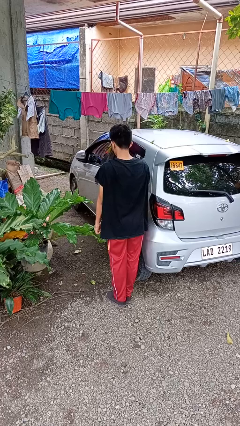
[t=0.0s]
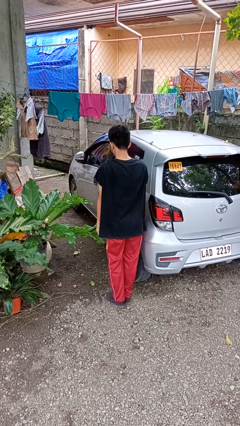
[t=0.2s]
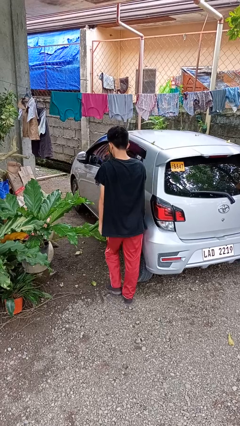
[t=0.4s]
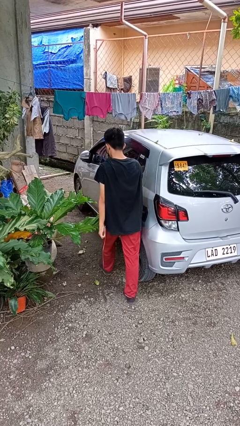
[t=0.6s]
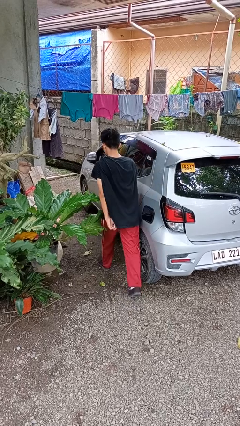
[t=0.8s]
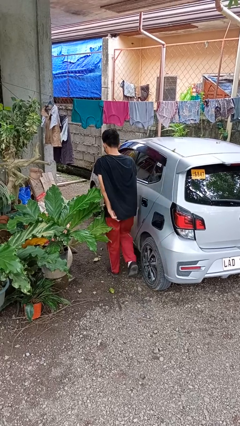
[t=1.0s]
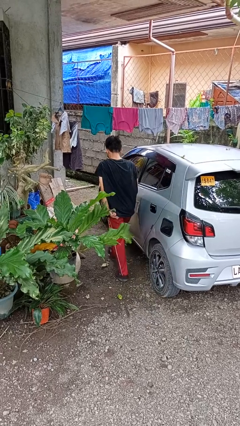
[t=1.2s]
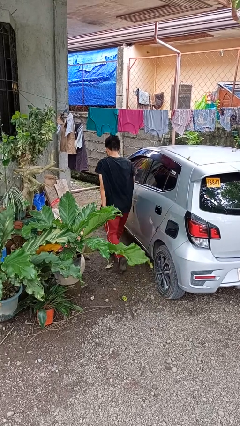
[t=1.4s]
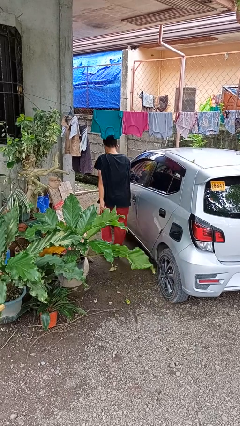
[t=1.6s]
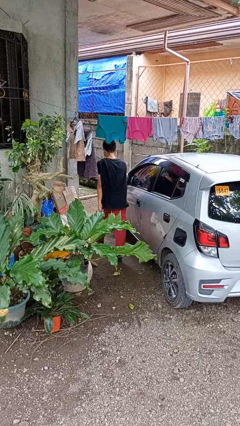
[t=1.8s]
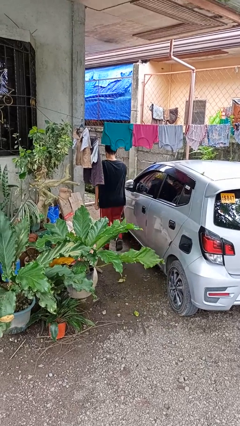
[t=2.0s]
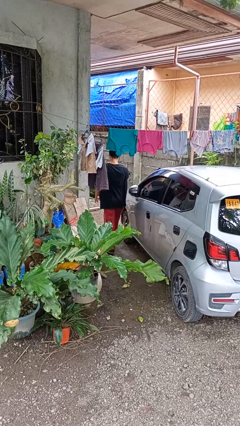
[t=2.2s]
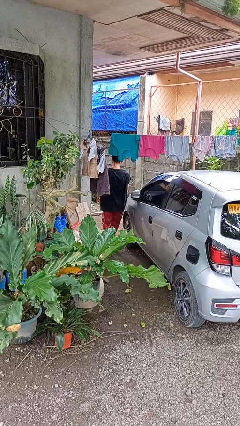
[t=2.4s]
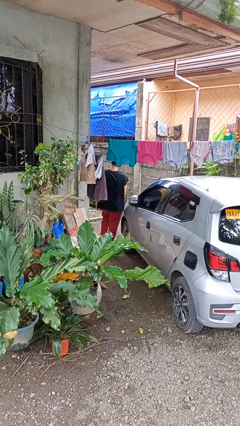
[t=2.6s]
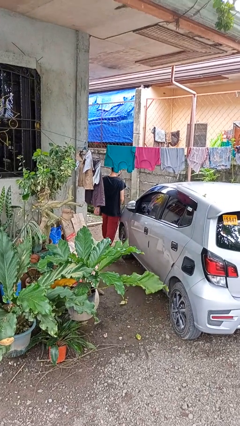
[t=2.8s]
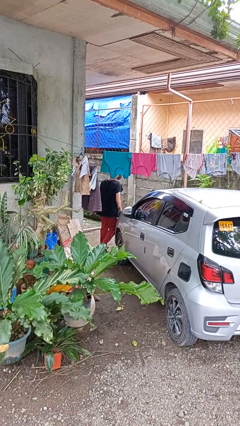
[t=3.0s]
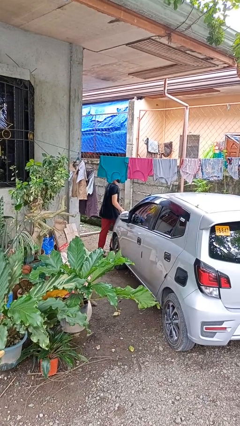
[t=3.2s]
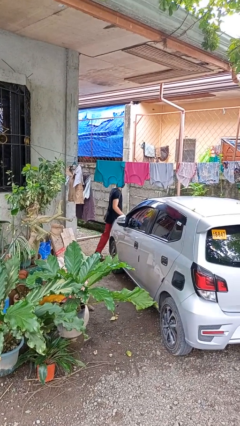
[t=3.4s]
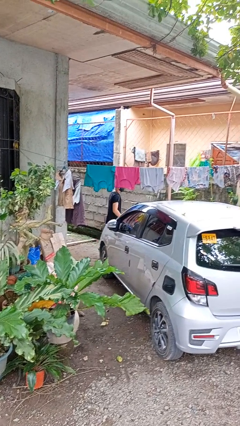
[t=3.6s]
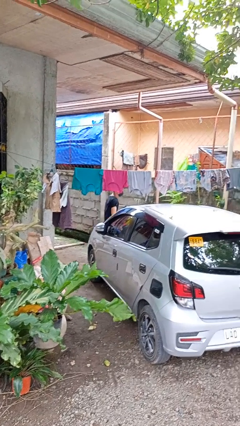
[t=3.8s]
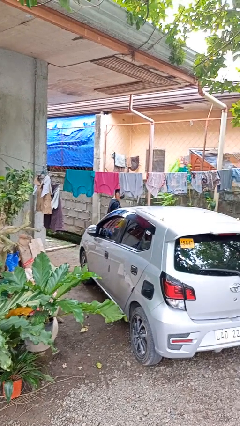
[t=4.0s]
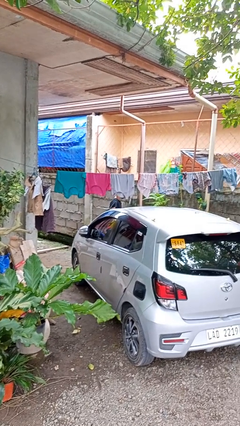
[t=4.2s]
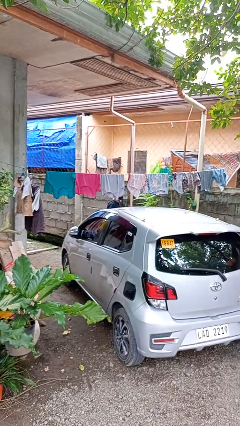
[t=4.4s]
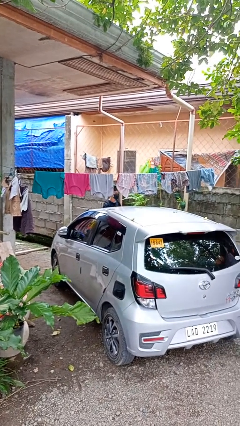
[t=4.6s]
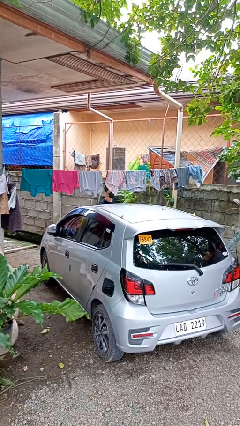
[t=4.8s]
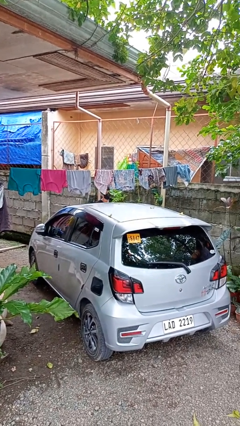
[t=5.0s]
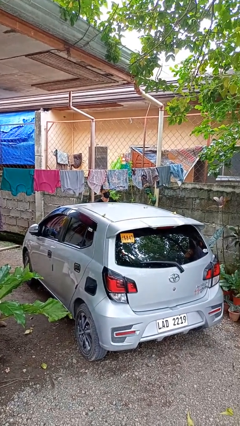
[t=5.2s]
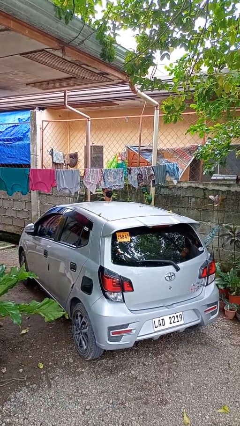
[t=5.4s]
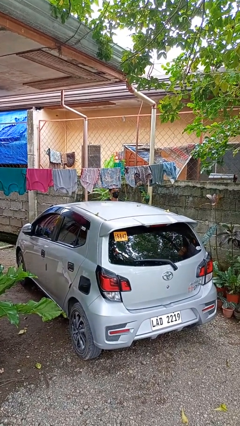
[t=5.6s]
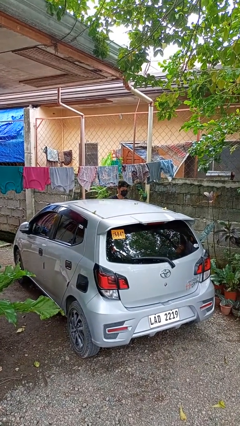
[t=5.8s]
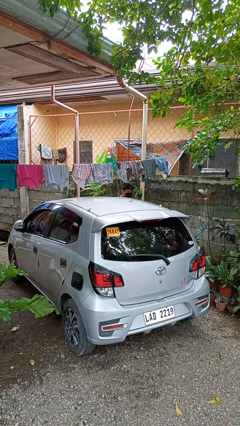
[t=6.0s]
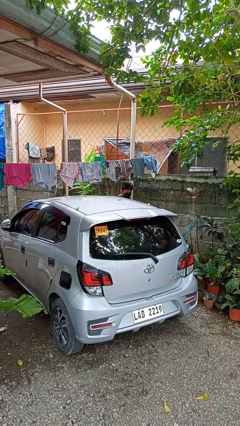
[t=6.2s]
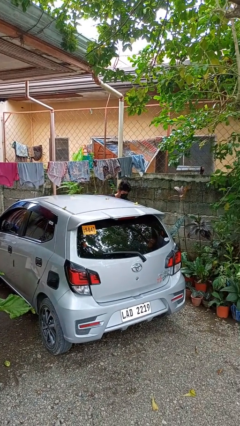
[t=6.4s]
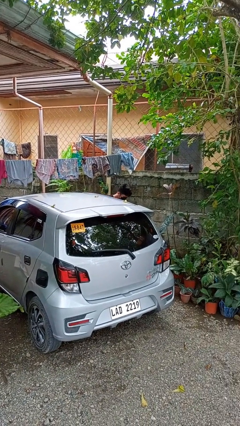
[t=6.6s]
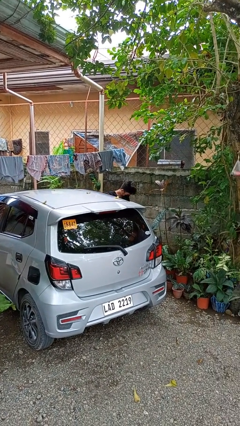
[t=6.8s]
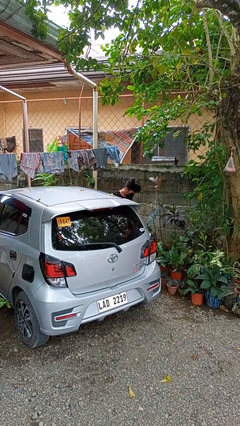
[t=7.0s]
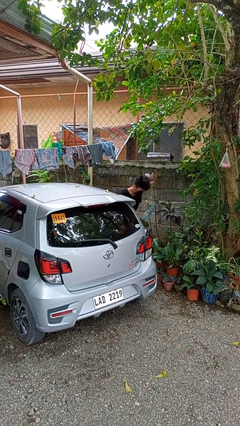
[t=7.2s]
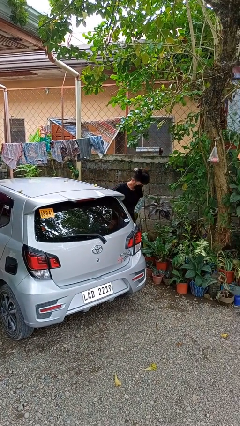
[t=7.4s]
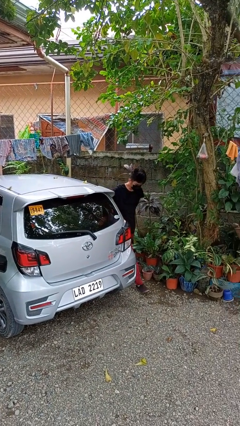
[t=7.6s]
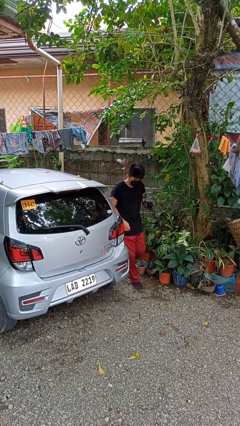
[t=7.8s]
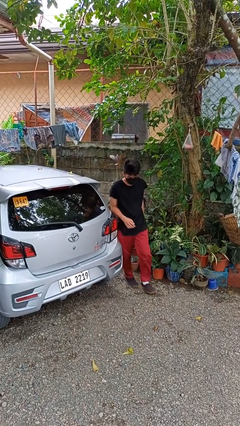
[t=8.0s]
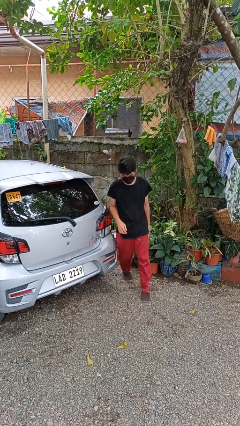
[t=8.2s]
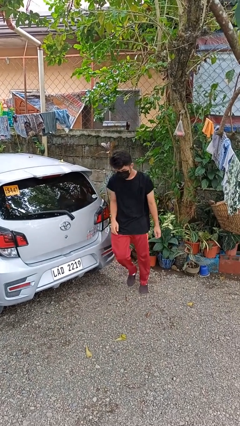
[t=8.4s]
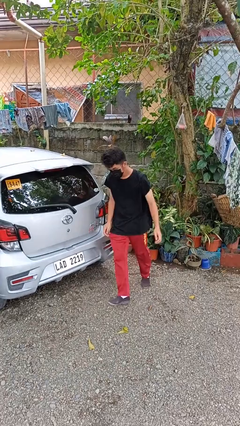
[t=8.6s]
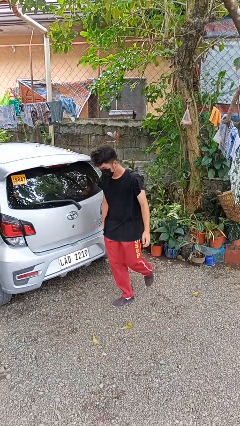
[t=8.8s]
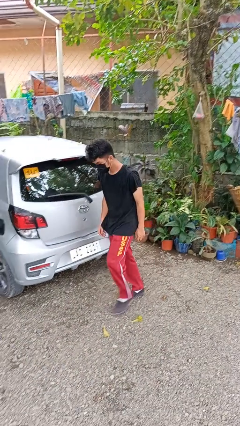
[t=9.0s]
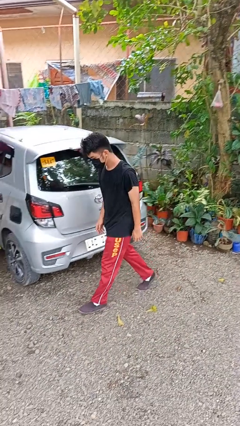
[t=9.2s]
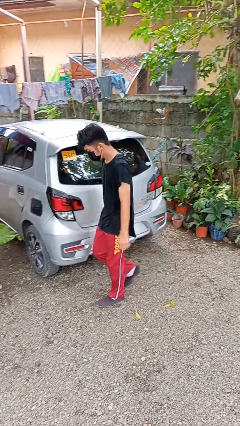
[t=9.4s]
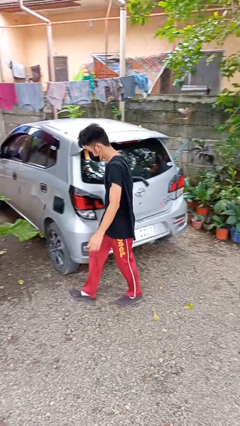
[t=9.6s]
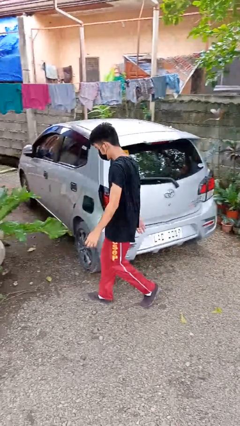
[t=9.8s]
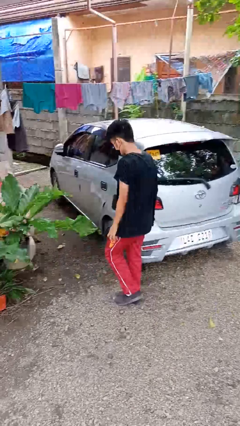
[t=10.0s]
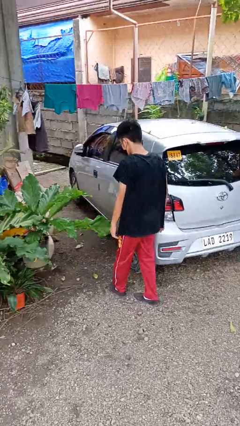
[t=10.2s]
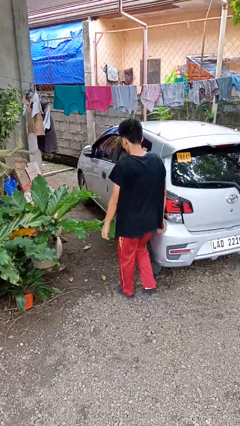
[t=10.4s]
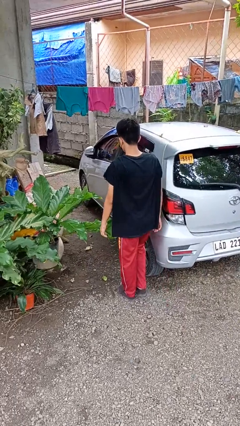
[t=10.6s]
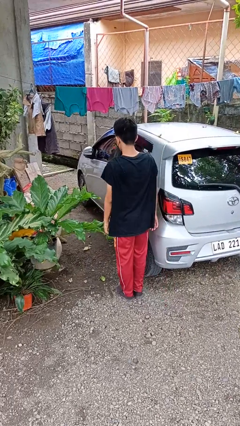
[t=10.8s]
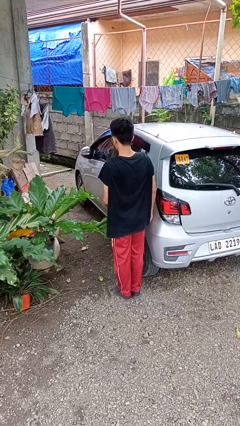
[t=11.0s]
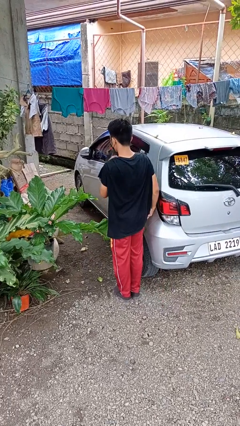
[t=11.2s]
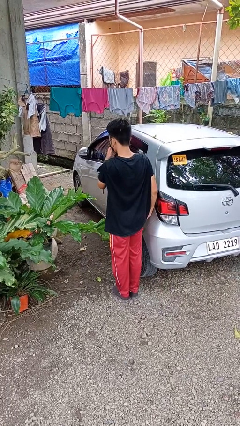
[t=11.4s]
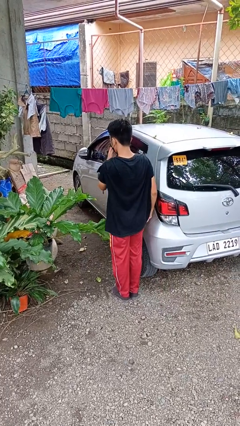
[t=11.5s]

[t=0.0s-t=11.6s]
person walks around car

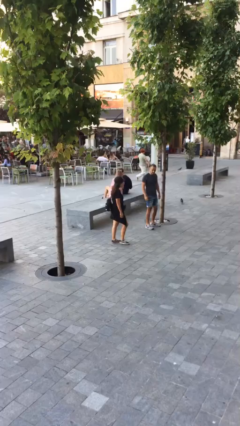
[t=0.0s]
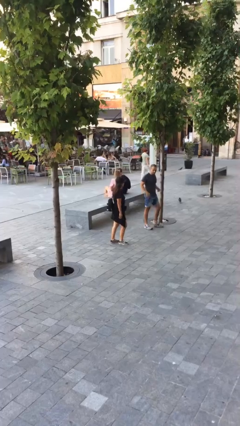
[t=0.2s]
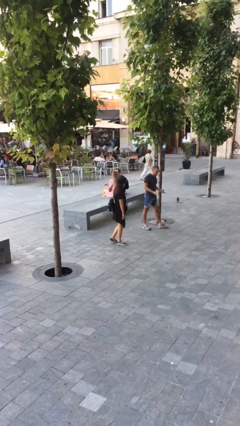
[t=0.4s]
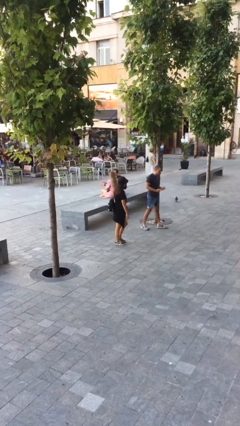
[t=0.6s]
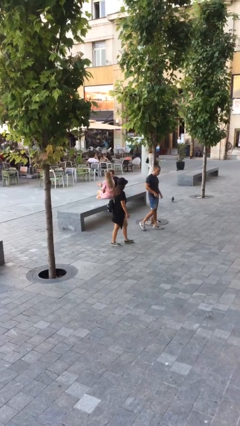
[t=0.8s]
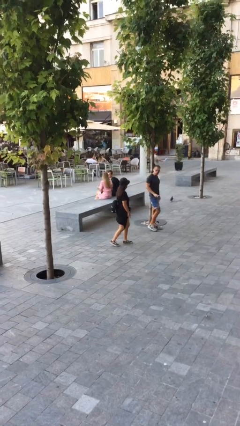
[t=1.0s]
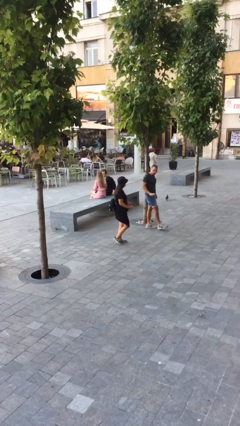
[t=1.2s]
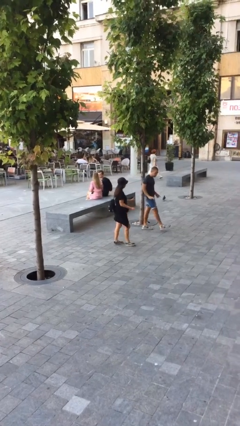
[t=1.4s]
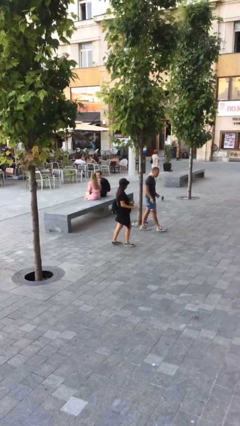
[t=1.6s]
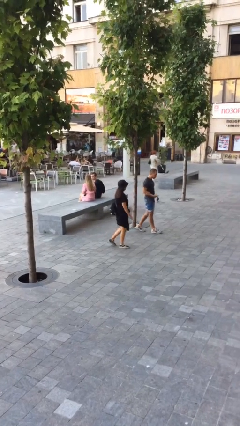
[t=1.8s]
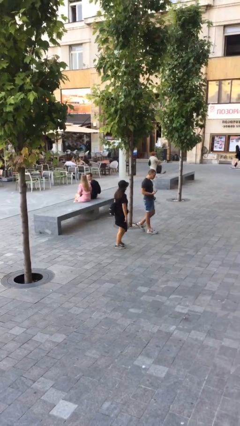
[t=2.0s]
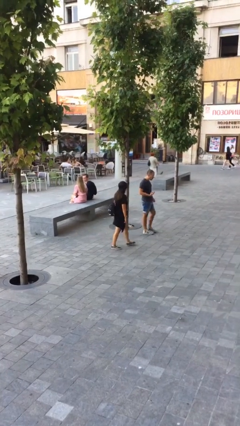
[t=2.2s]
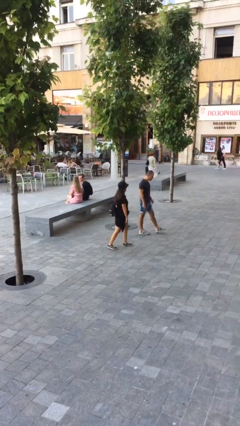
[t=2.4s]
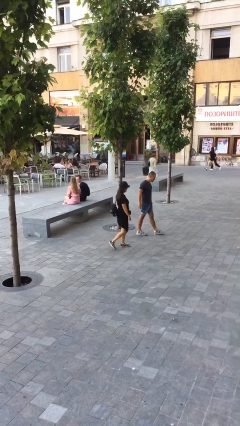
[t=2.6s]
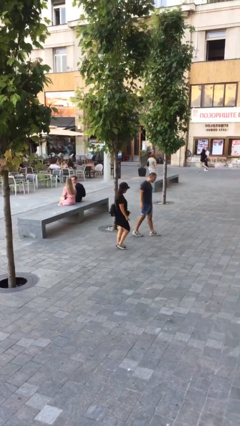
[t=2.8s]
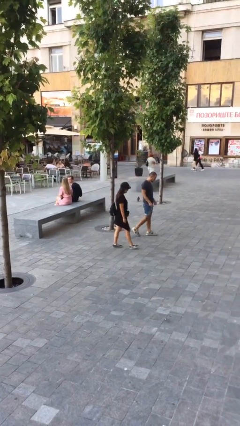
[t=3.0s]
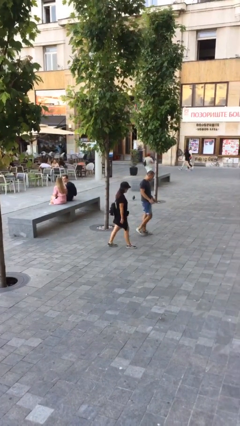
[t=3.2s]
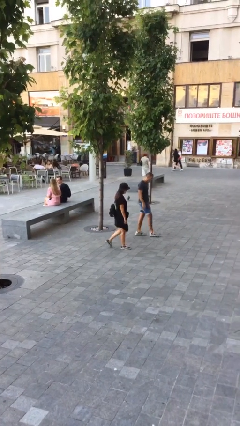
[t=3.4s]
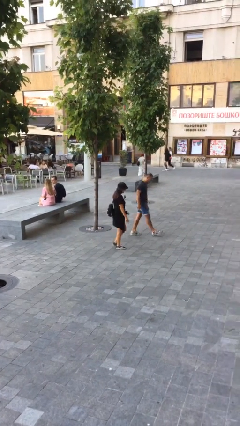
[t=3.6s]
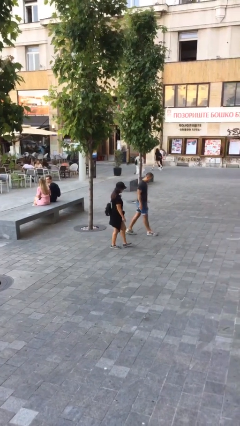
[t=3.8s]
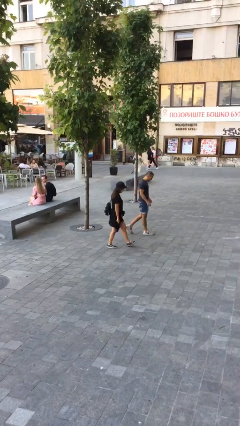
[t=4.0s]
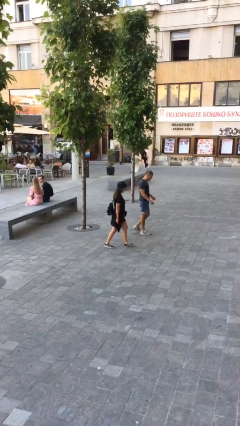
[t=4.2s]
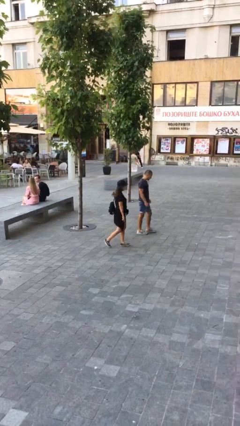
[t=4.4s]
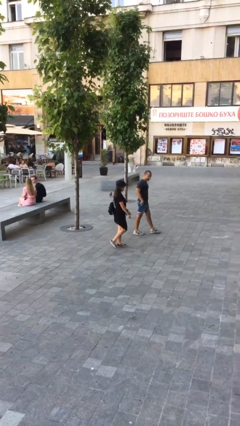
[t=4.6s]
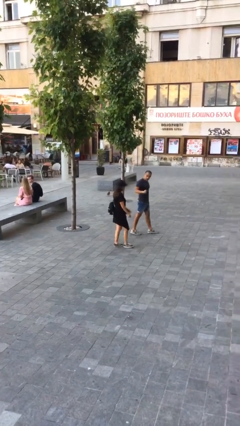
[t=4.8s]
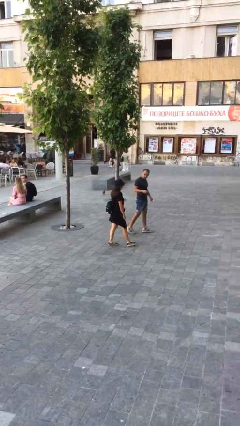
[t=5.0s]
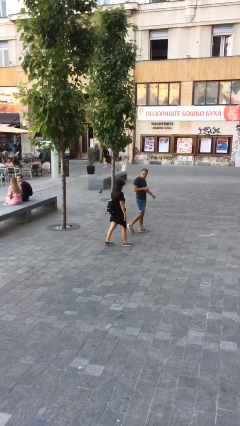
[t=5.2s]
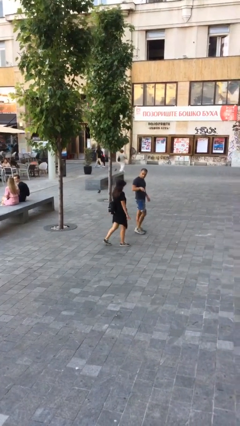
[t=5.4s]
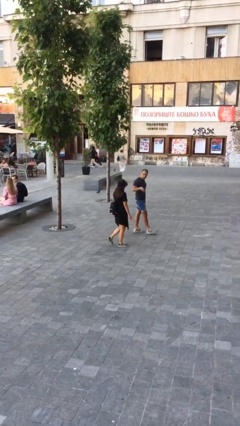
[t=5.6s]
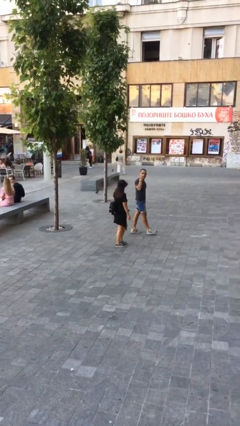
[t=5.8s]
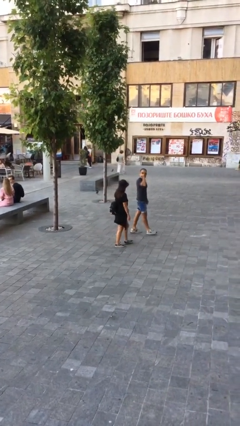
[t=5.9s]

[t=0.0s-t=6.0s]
person talks to person

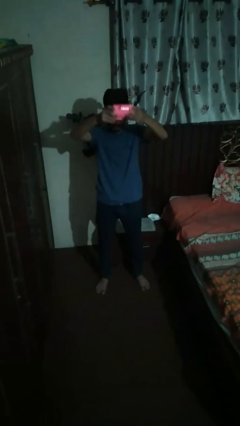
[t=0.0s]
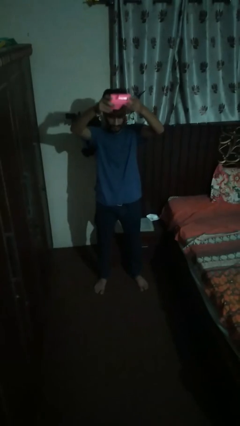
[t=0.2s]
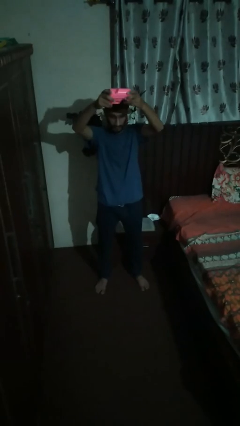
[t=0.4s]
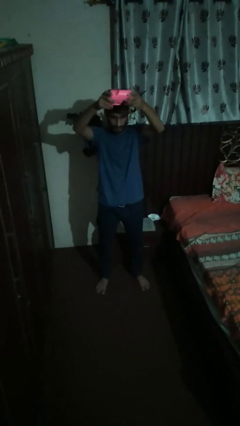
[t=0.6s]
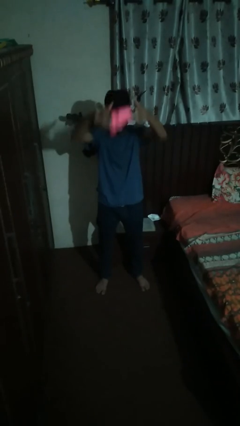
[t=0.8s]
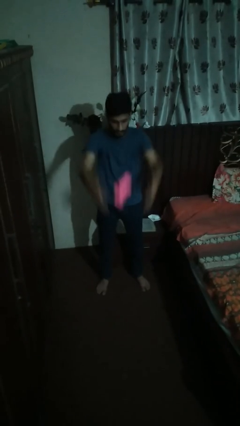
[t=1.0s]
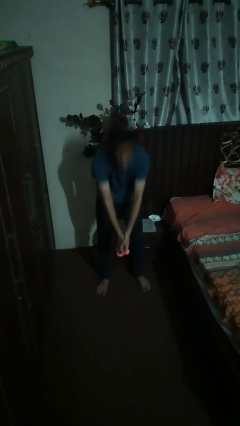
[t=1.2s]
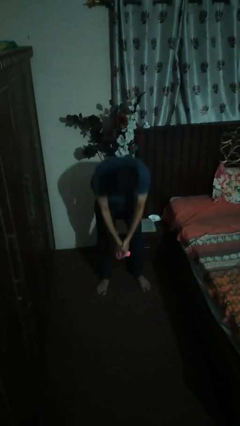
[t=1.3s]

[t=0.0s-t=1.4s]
person drops object
